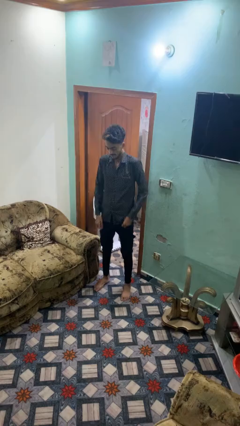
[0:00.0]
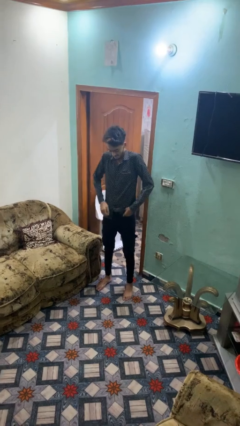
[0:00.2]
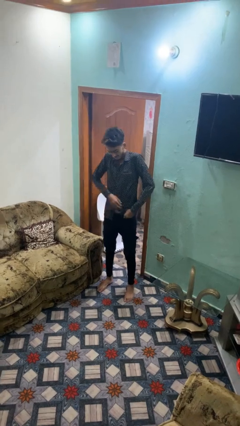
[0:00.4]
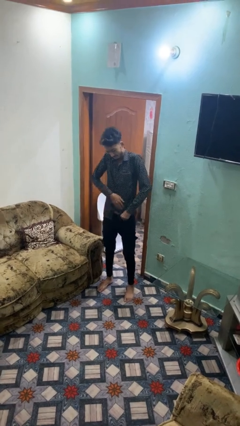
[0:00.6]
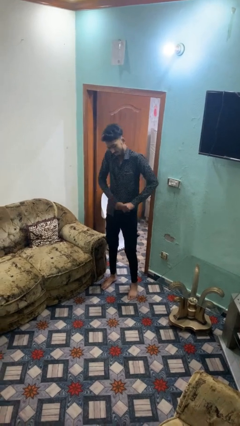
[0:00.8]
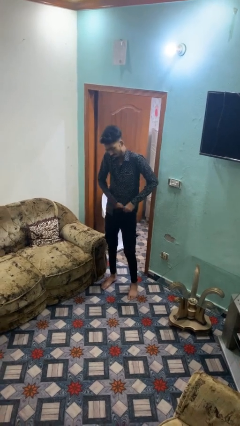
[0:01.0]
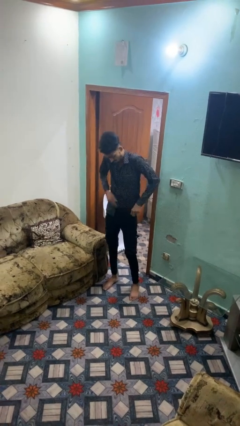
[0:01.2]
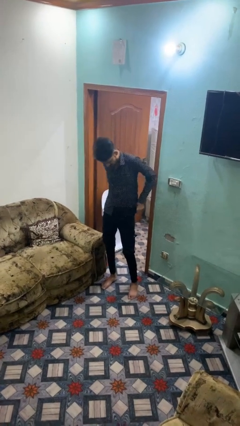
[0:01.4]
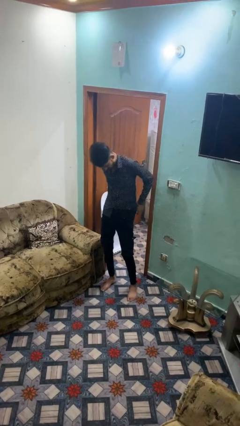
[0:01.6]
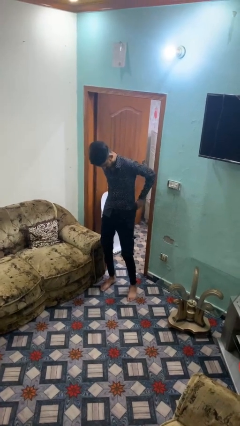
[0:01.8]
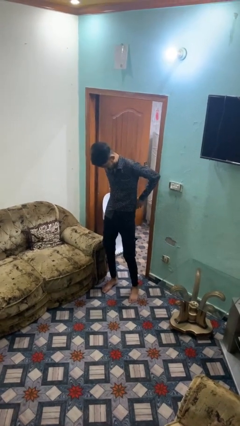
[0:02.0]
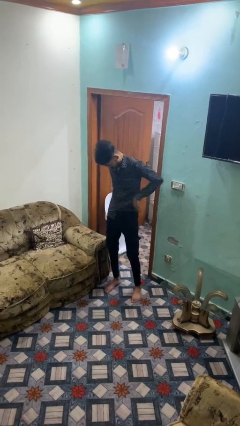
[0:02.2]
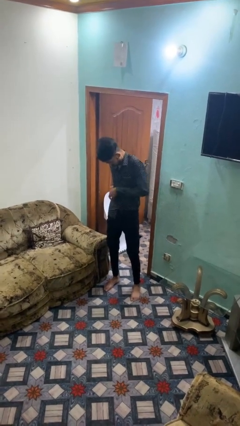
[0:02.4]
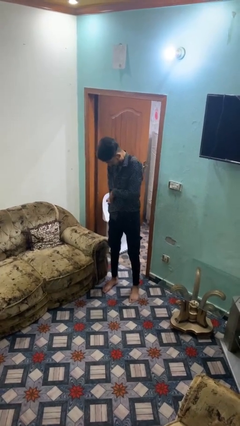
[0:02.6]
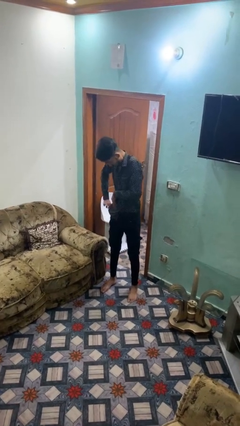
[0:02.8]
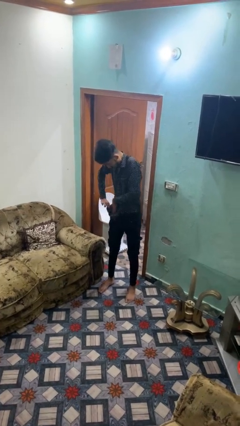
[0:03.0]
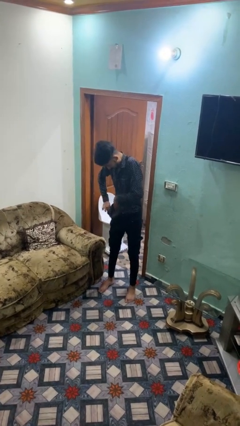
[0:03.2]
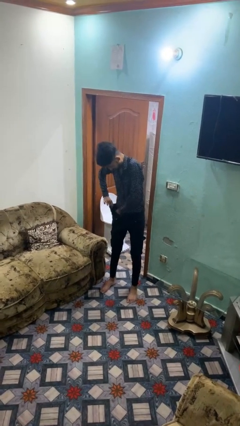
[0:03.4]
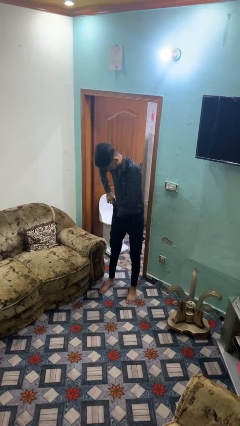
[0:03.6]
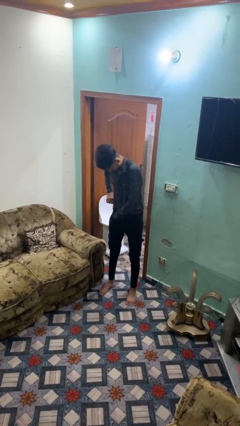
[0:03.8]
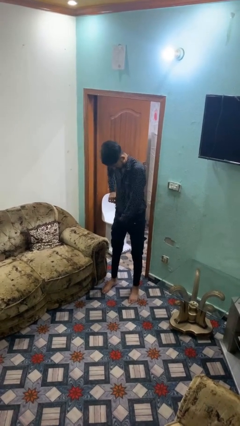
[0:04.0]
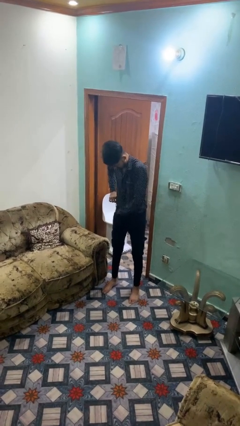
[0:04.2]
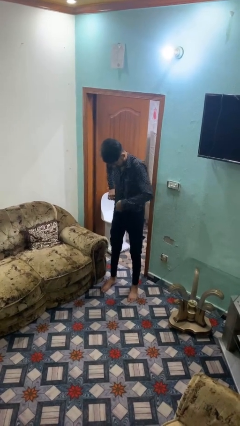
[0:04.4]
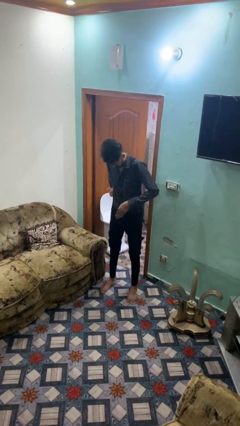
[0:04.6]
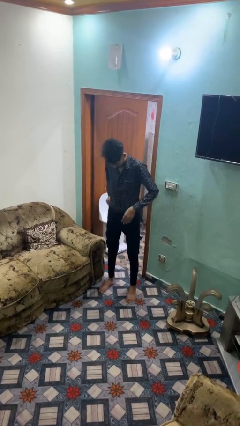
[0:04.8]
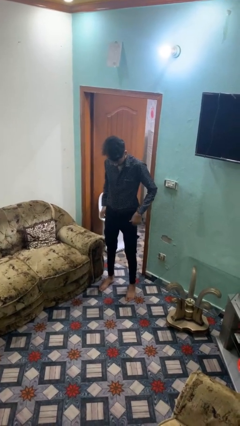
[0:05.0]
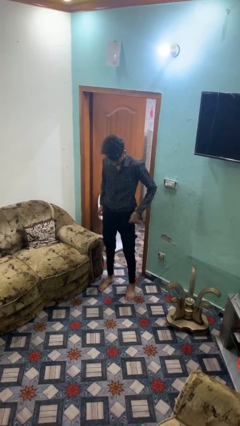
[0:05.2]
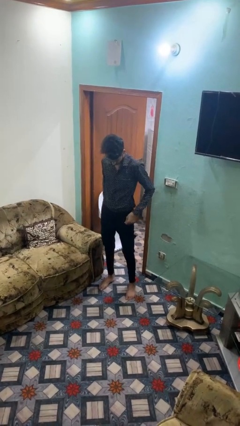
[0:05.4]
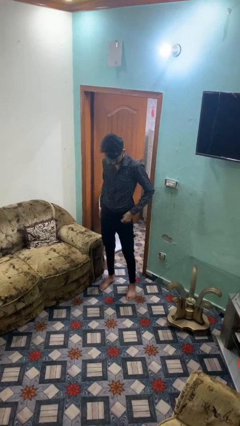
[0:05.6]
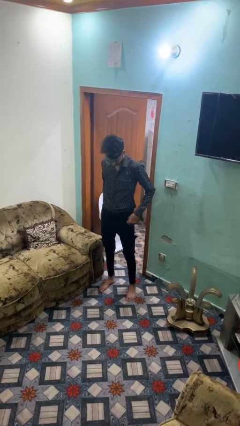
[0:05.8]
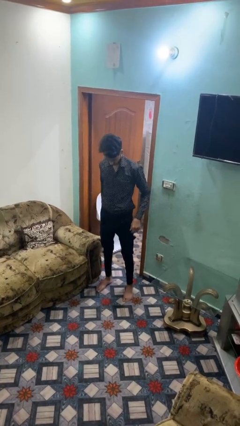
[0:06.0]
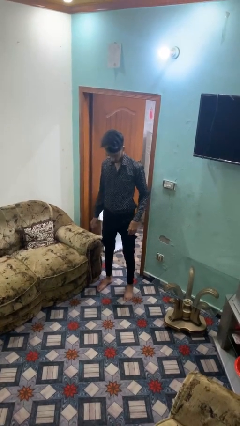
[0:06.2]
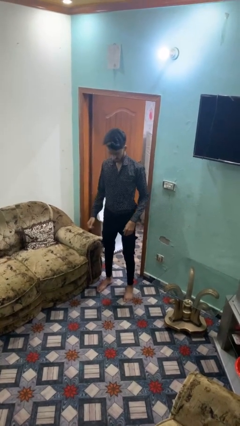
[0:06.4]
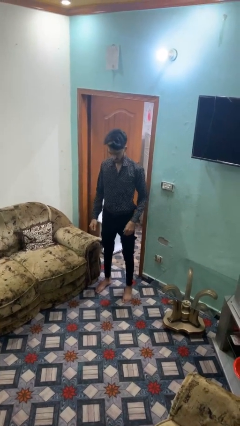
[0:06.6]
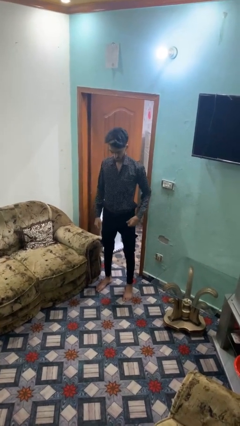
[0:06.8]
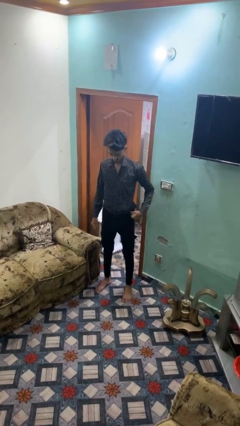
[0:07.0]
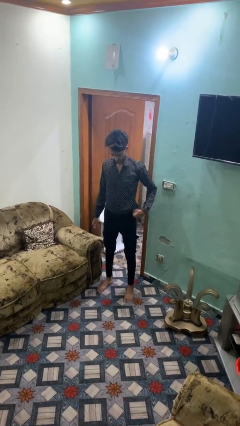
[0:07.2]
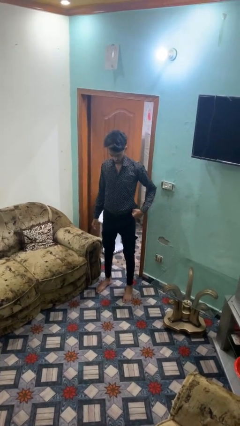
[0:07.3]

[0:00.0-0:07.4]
person tucks in shirt

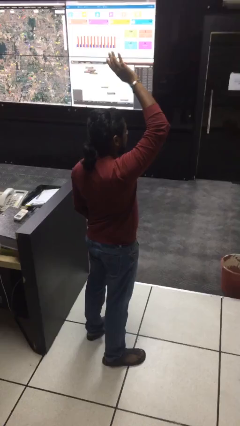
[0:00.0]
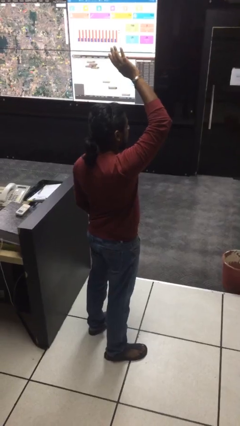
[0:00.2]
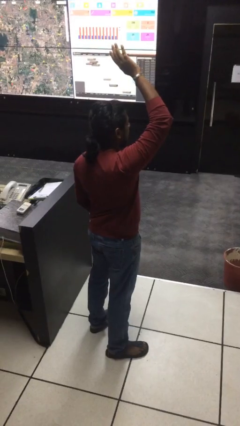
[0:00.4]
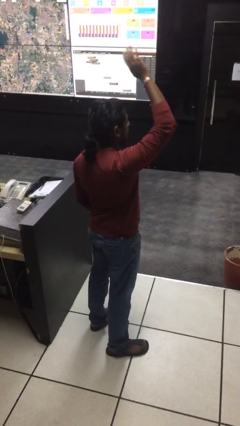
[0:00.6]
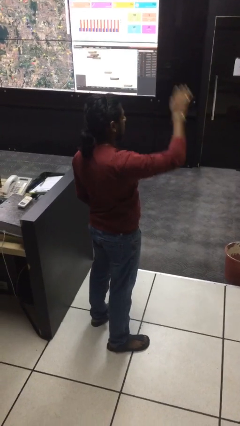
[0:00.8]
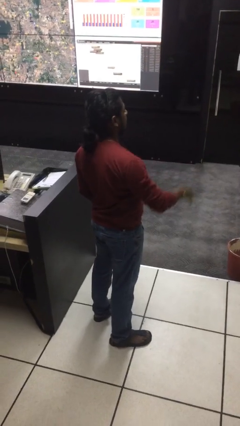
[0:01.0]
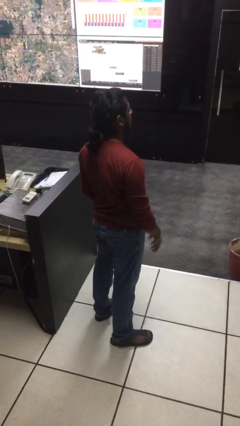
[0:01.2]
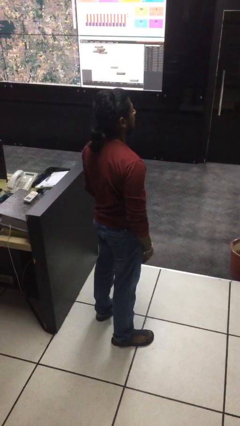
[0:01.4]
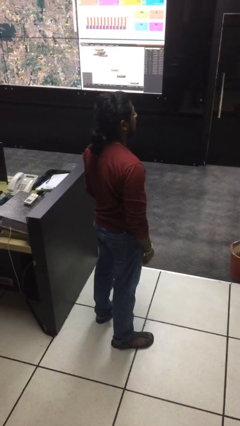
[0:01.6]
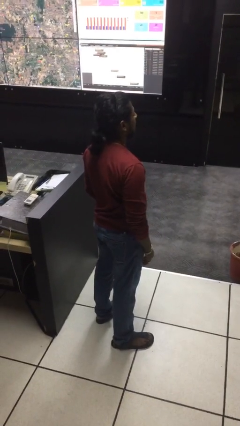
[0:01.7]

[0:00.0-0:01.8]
person gestures lower hand

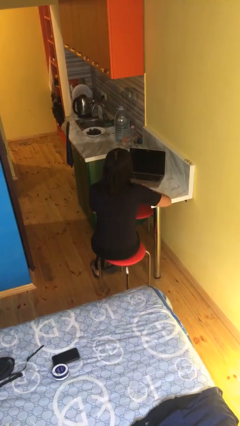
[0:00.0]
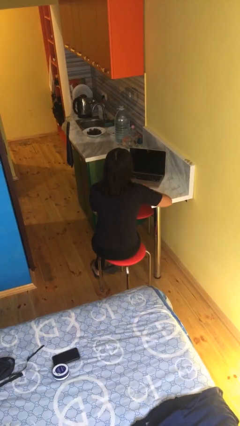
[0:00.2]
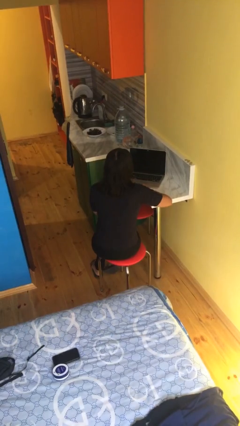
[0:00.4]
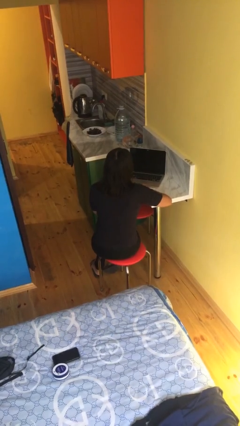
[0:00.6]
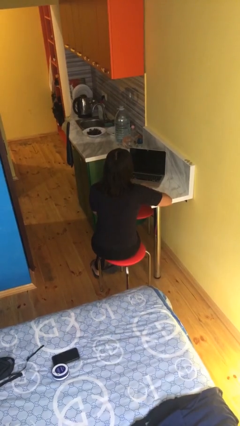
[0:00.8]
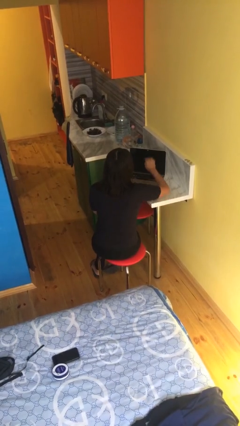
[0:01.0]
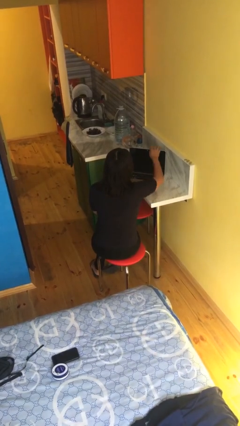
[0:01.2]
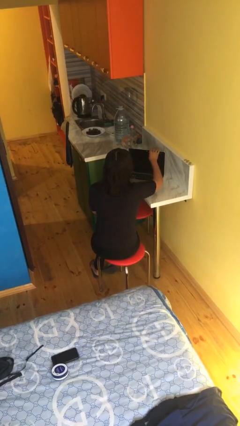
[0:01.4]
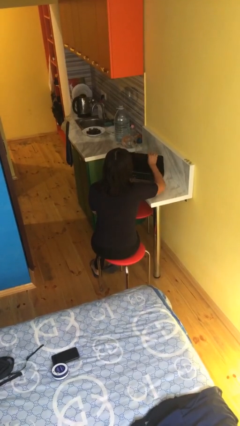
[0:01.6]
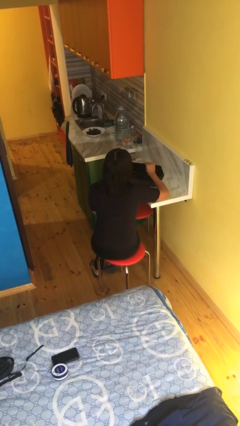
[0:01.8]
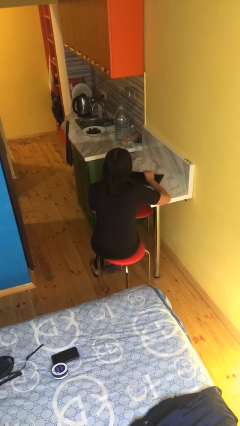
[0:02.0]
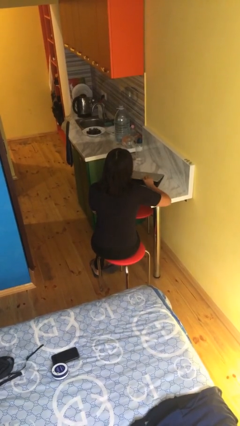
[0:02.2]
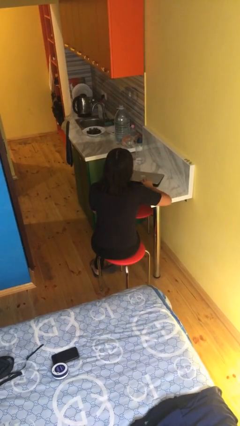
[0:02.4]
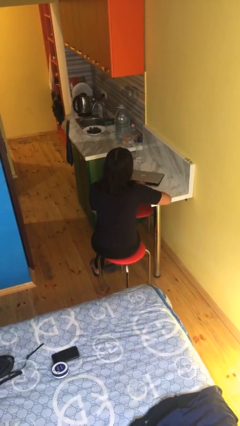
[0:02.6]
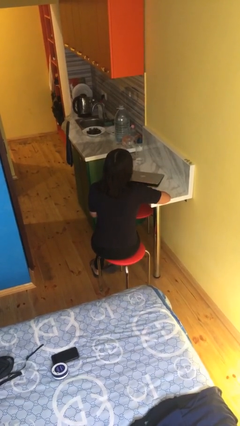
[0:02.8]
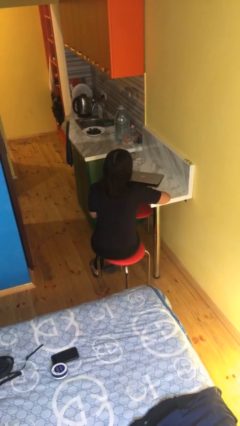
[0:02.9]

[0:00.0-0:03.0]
person closes laptop

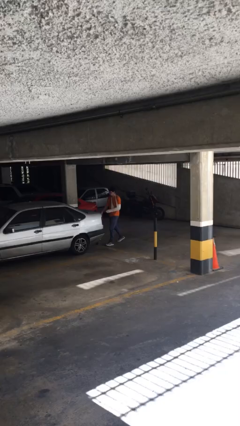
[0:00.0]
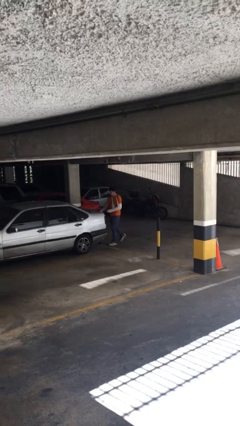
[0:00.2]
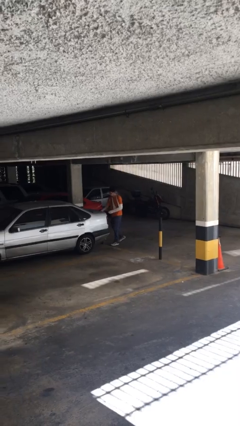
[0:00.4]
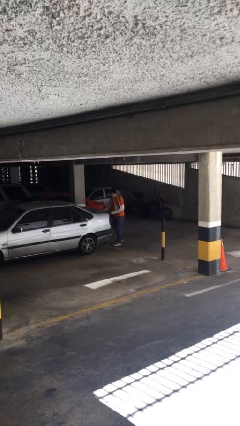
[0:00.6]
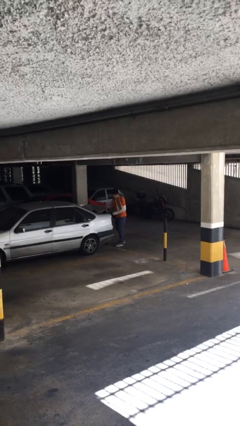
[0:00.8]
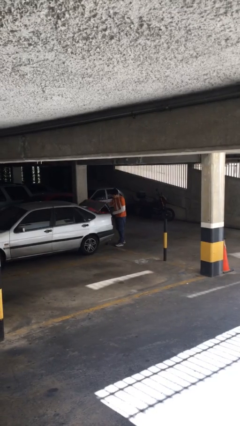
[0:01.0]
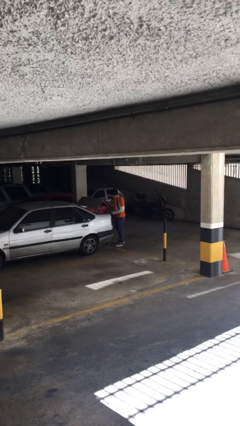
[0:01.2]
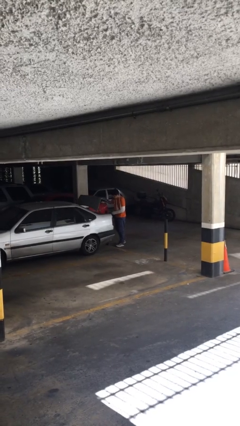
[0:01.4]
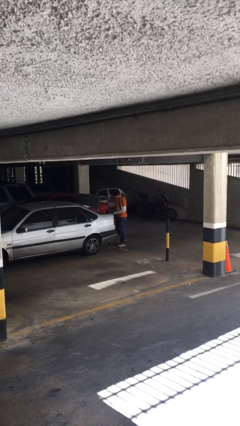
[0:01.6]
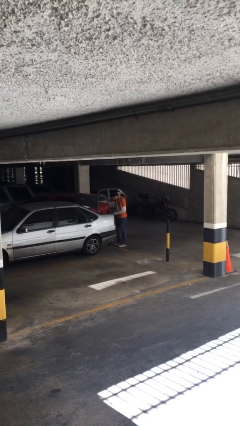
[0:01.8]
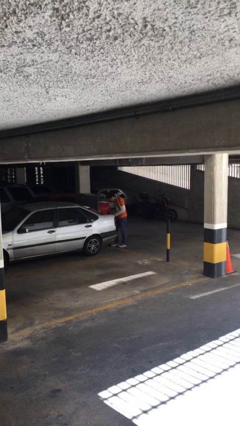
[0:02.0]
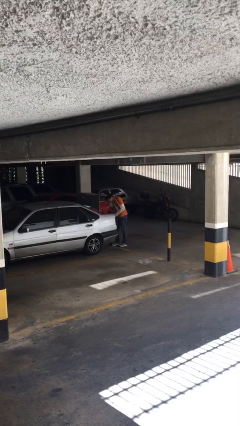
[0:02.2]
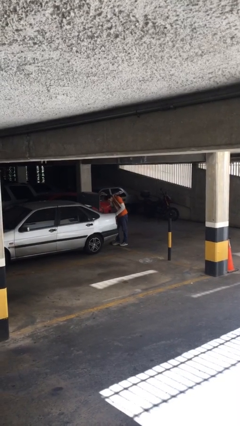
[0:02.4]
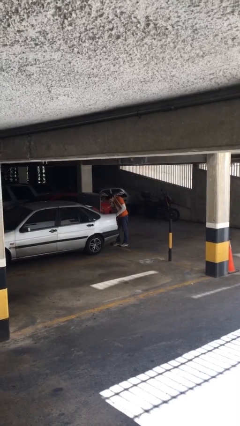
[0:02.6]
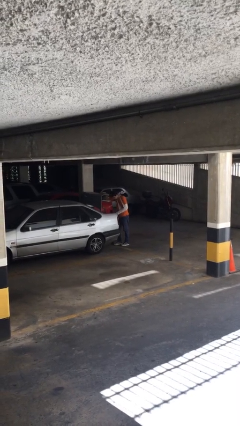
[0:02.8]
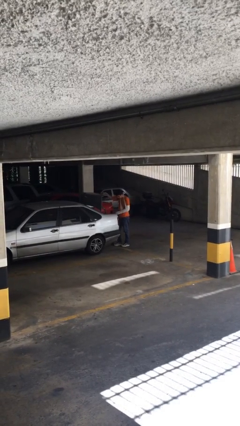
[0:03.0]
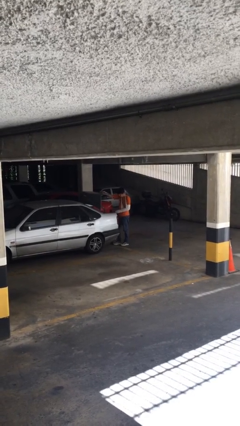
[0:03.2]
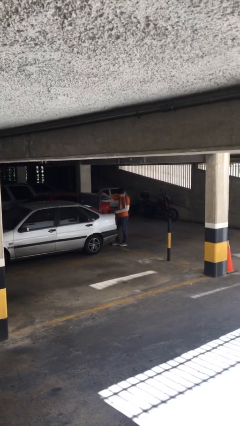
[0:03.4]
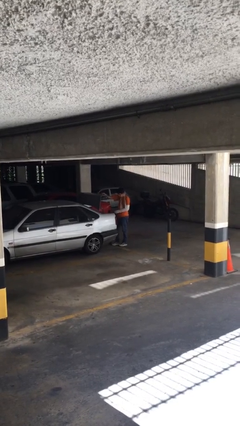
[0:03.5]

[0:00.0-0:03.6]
person opens car trunk

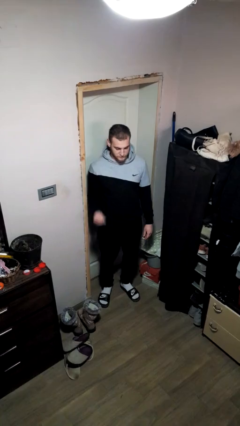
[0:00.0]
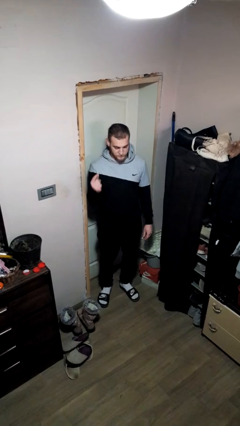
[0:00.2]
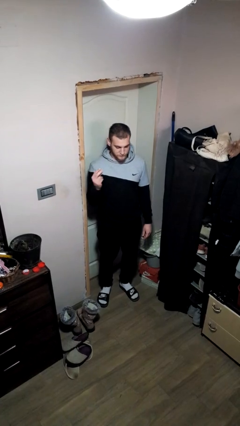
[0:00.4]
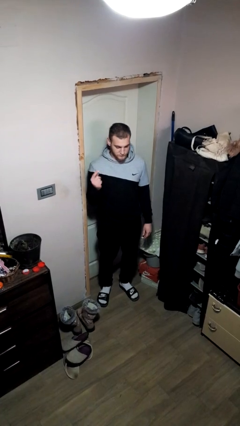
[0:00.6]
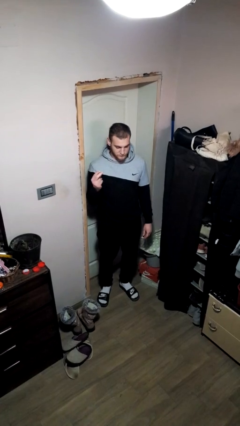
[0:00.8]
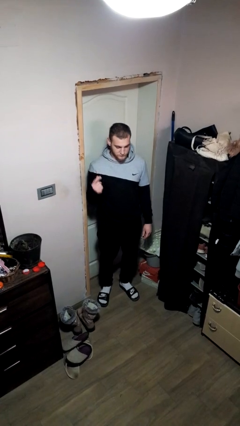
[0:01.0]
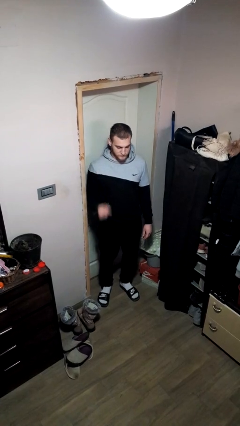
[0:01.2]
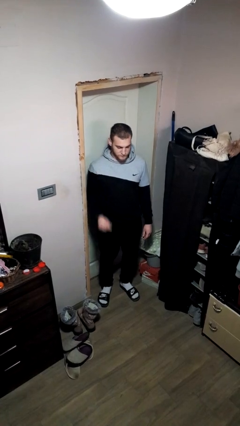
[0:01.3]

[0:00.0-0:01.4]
person snaps fingers

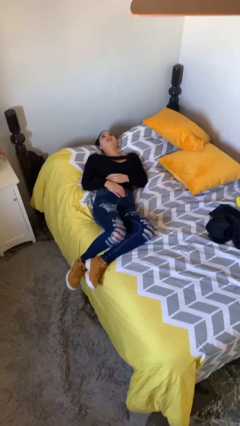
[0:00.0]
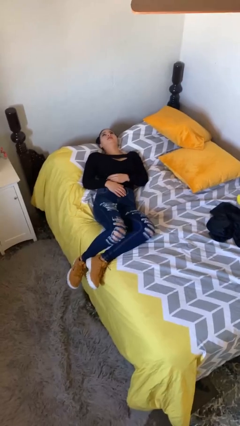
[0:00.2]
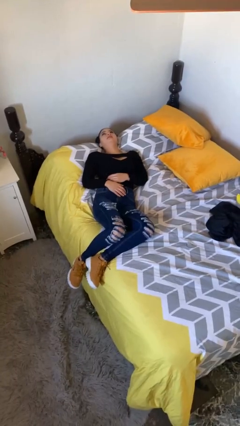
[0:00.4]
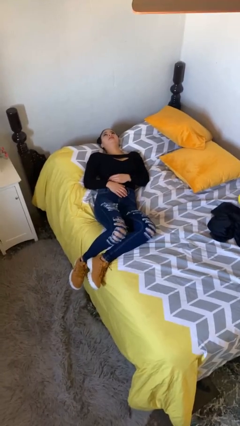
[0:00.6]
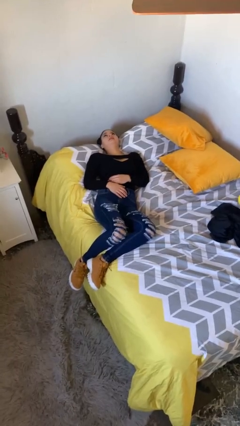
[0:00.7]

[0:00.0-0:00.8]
person lies down on bed
